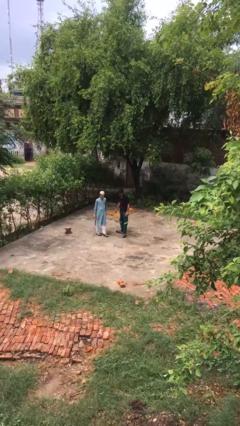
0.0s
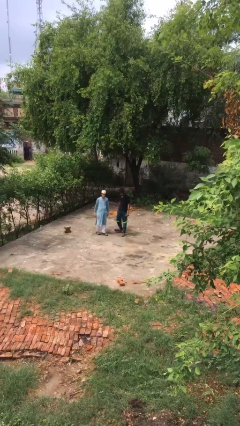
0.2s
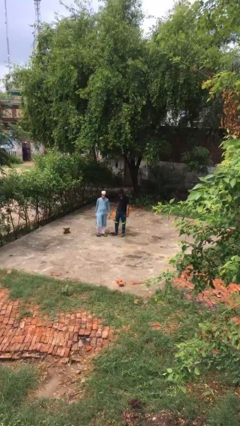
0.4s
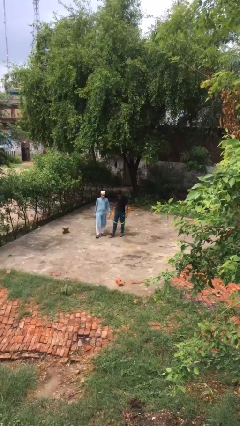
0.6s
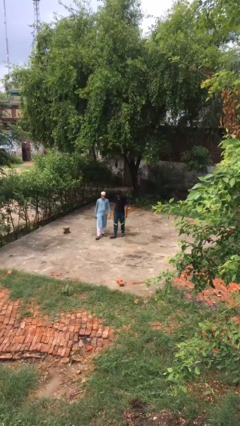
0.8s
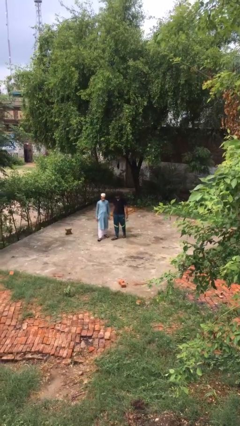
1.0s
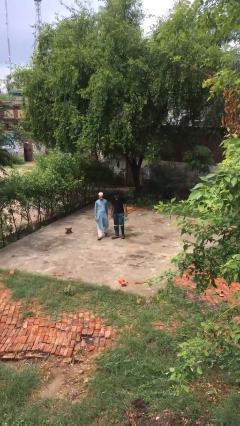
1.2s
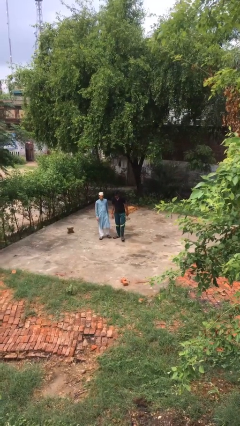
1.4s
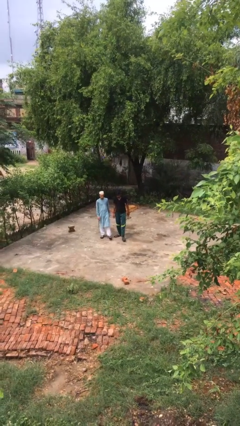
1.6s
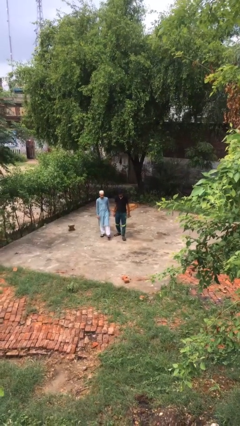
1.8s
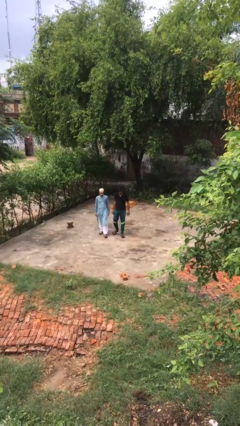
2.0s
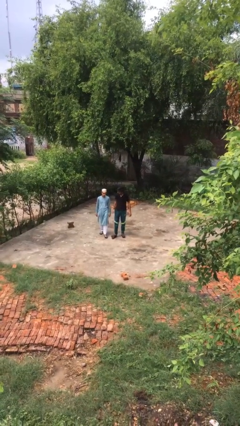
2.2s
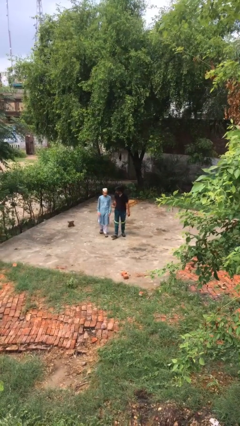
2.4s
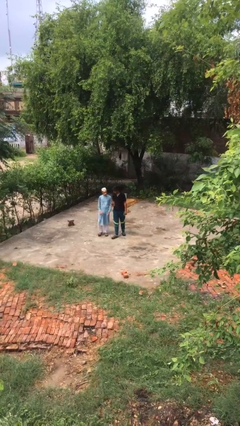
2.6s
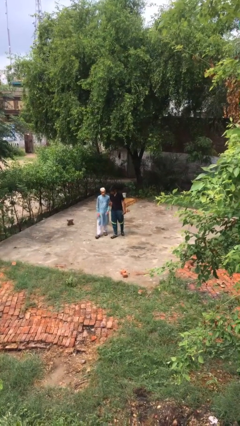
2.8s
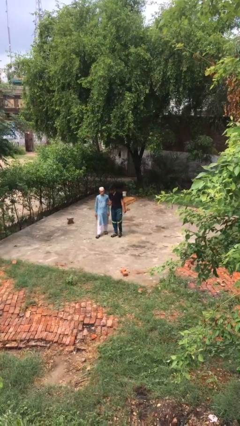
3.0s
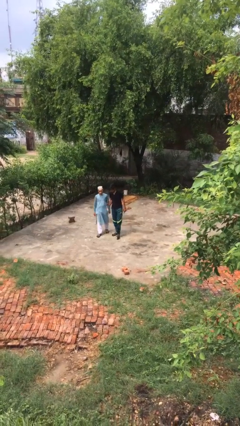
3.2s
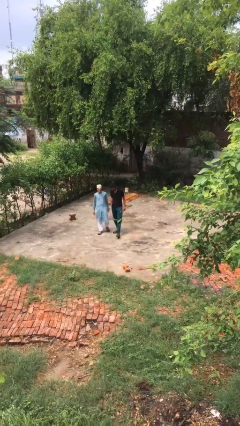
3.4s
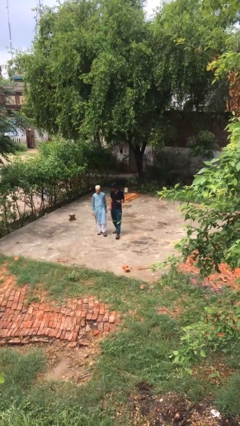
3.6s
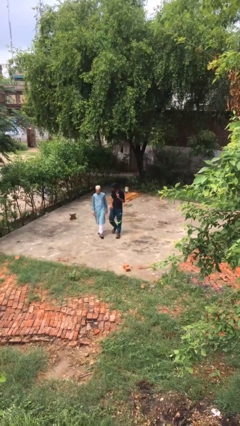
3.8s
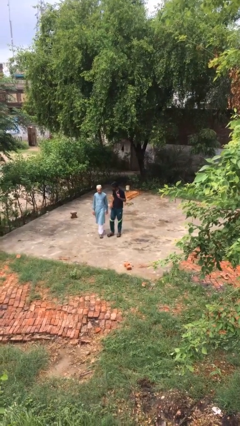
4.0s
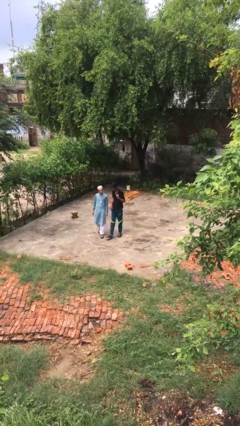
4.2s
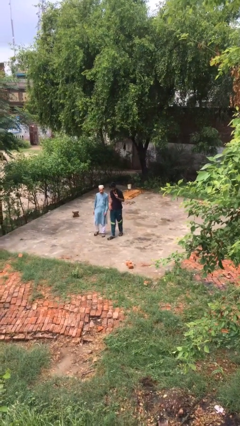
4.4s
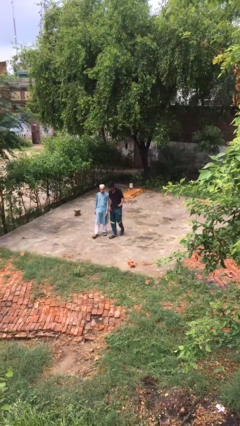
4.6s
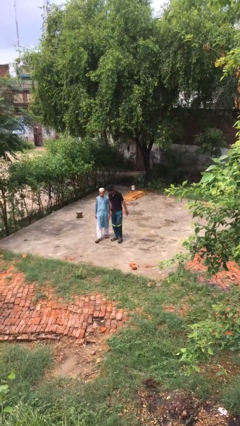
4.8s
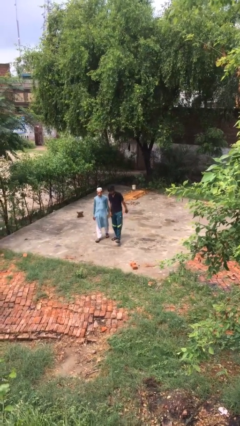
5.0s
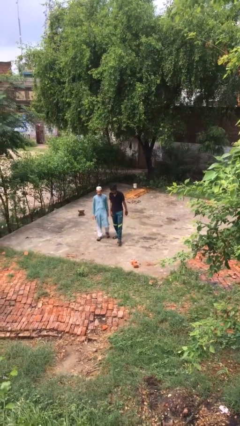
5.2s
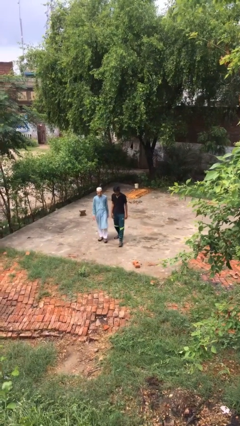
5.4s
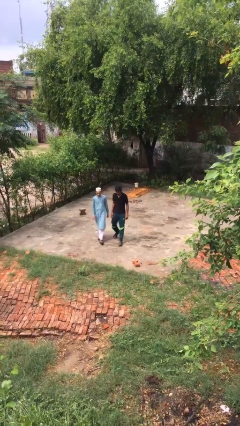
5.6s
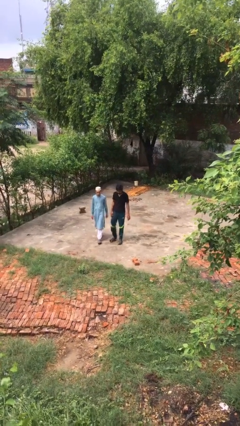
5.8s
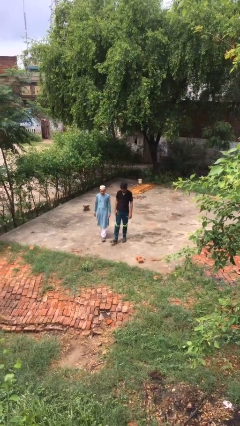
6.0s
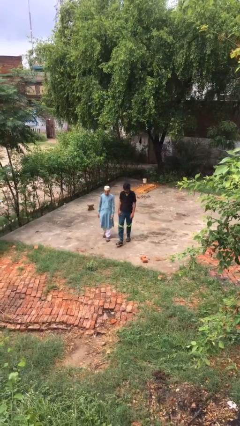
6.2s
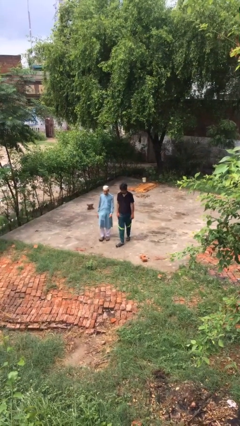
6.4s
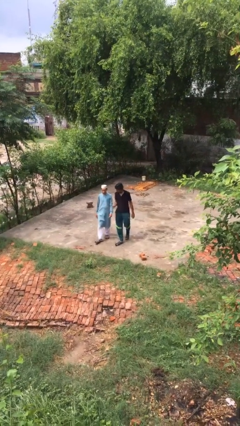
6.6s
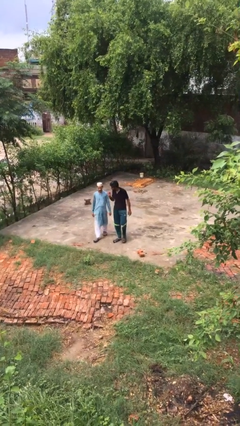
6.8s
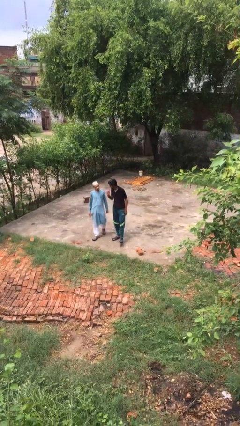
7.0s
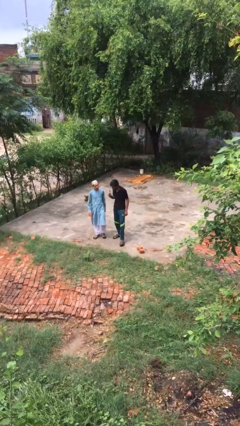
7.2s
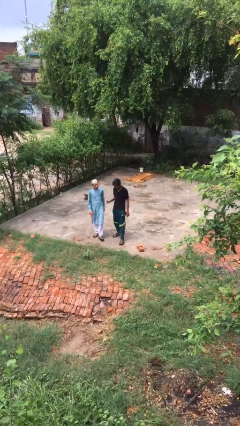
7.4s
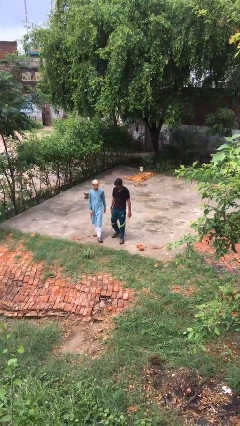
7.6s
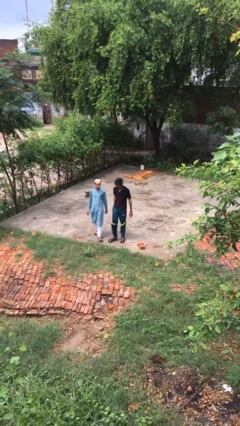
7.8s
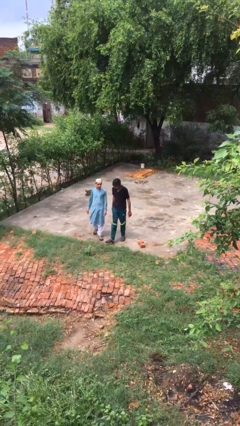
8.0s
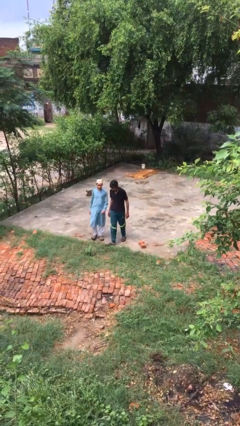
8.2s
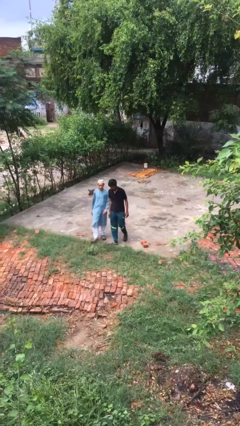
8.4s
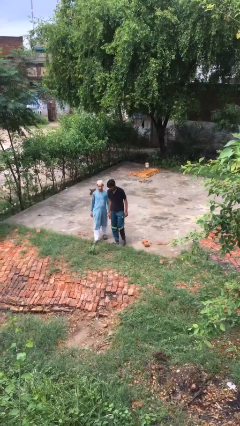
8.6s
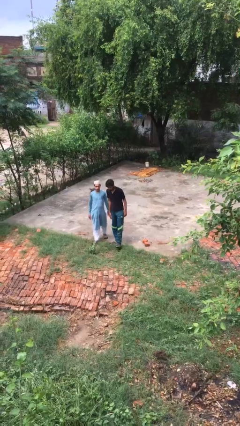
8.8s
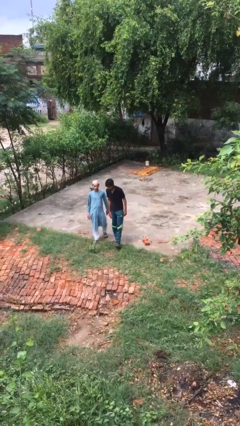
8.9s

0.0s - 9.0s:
person talks to person

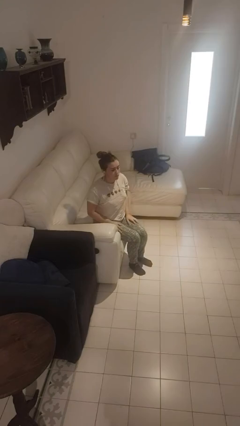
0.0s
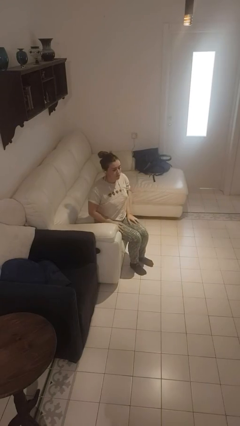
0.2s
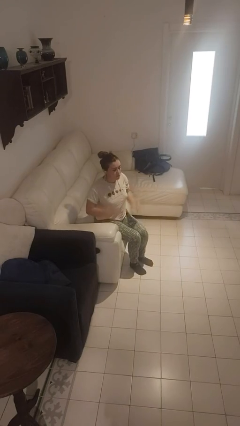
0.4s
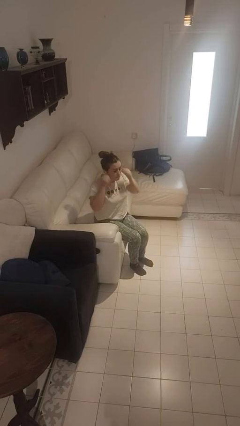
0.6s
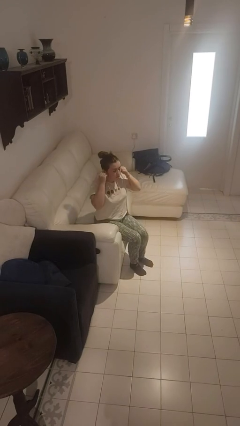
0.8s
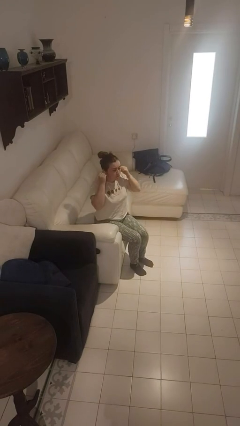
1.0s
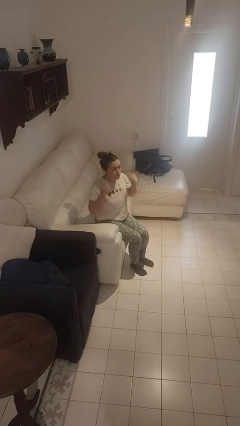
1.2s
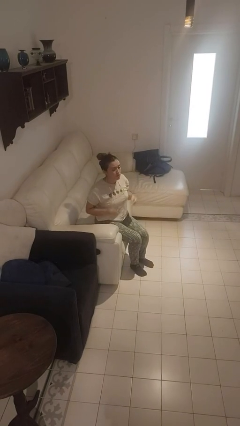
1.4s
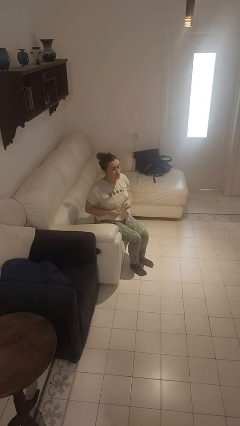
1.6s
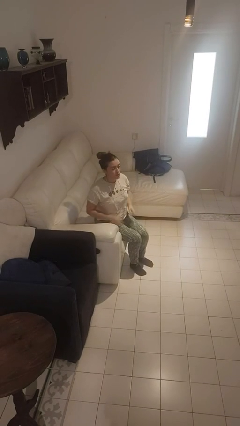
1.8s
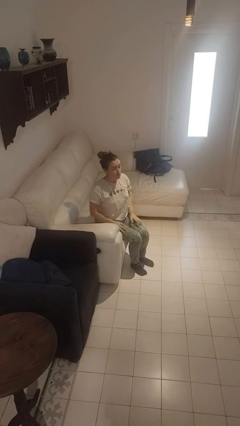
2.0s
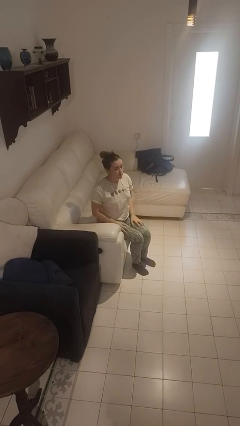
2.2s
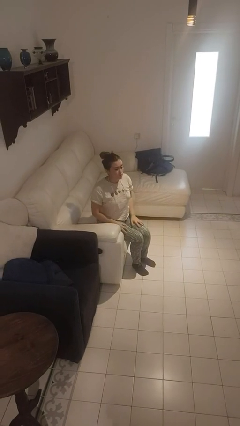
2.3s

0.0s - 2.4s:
person takes off headphones

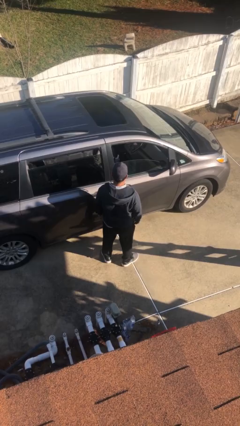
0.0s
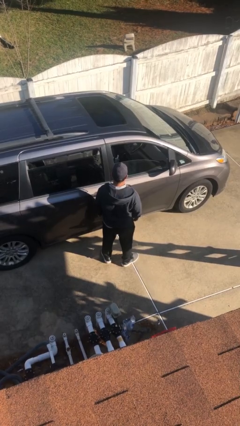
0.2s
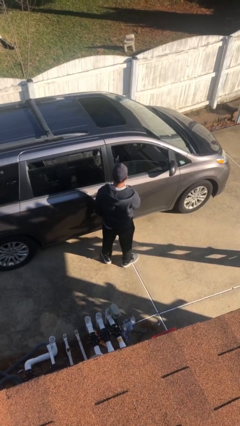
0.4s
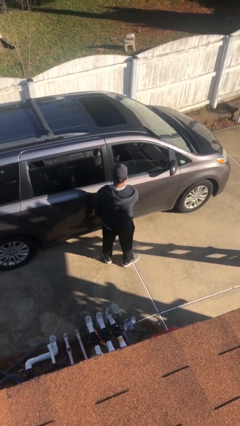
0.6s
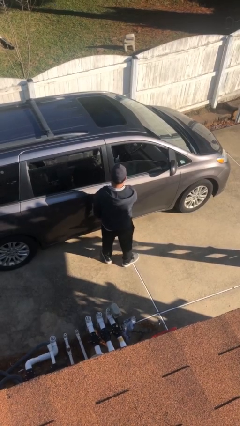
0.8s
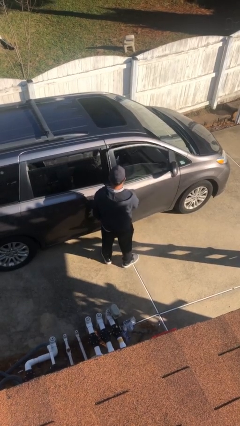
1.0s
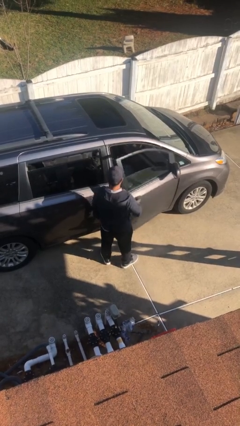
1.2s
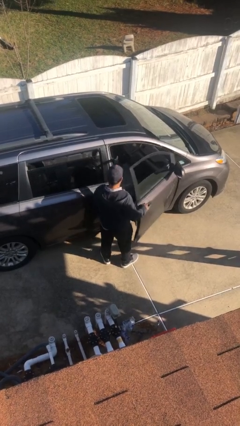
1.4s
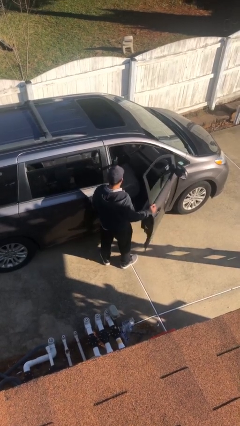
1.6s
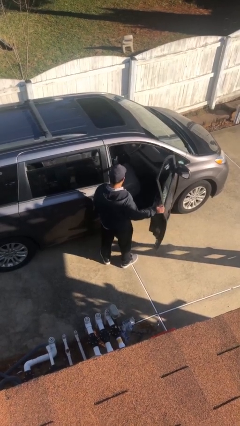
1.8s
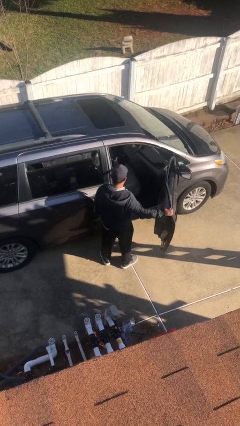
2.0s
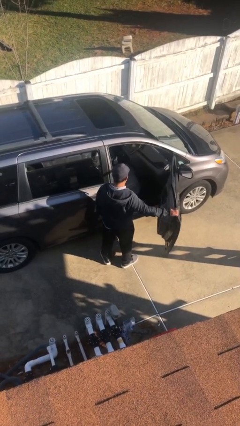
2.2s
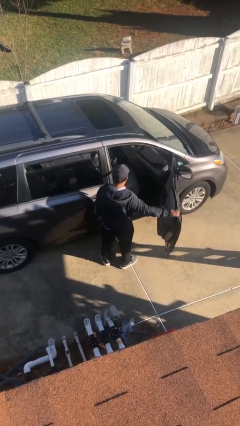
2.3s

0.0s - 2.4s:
person opens car door

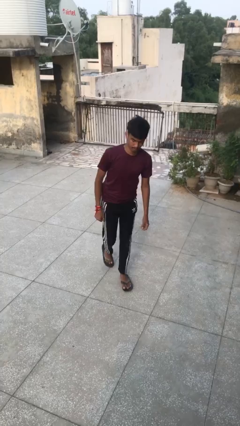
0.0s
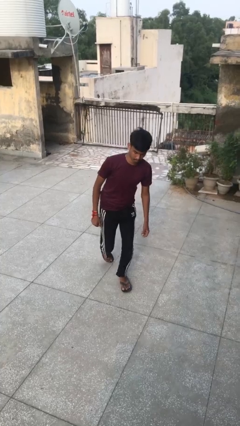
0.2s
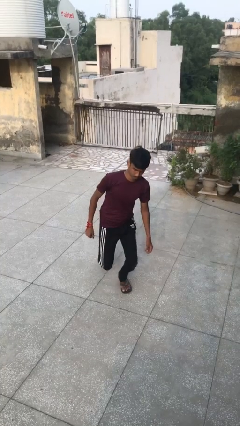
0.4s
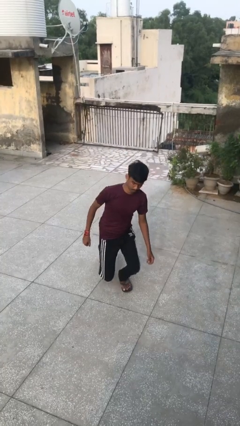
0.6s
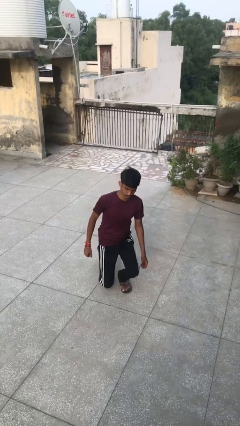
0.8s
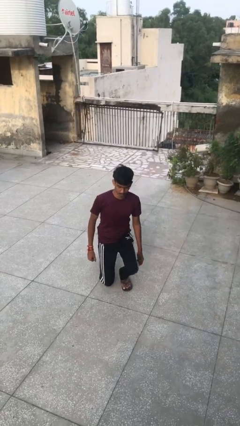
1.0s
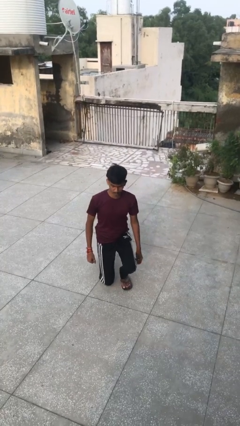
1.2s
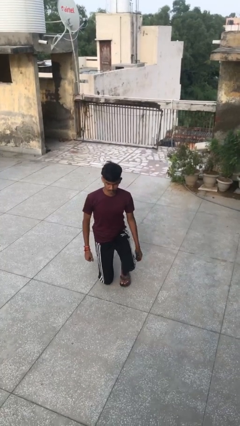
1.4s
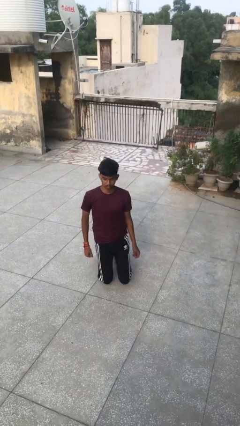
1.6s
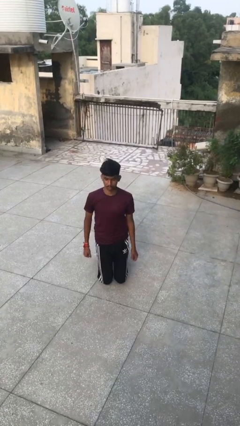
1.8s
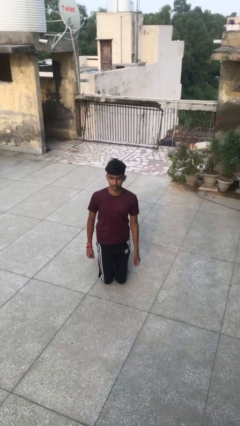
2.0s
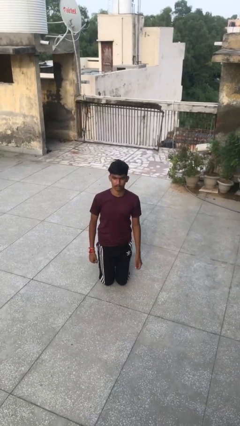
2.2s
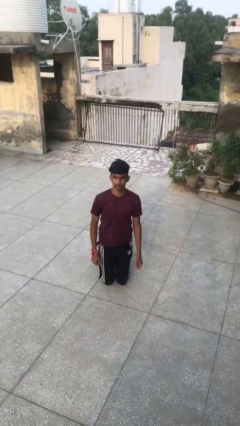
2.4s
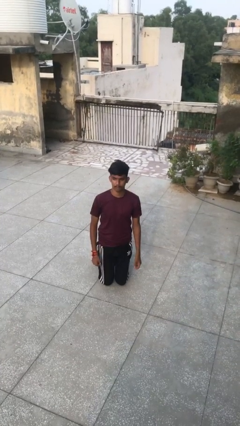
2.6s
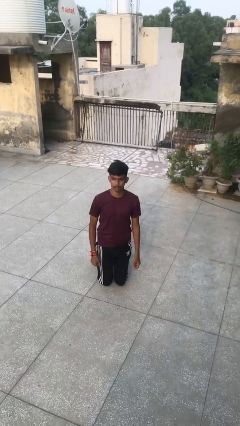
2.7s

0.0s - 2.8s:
person kneels

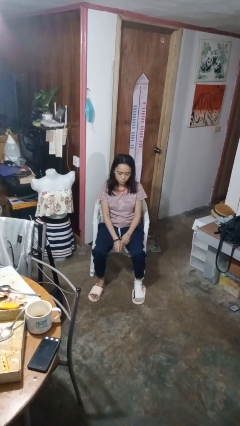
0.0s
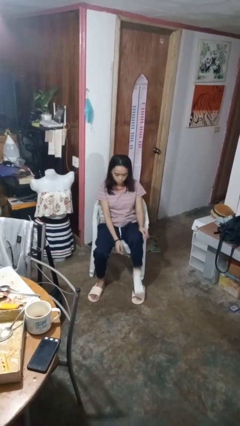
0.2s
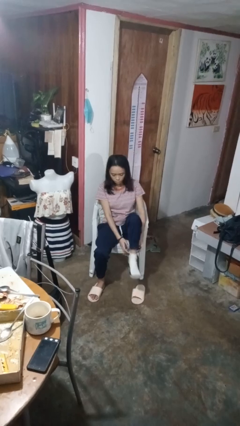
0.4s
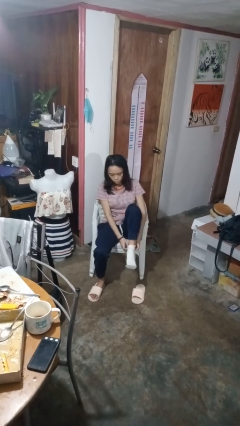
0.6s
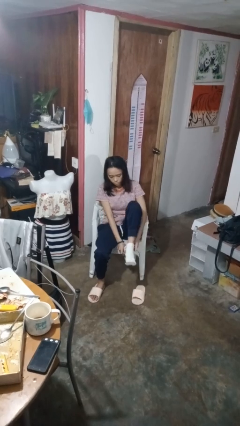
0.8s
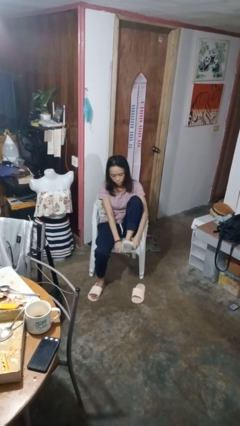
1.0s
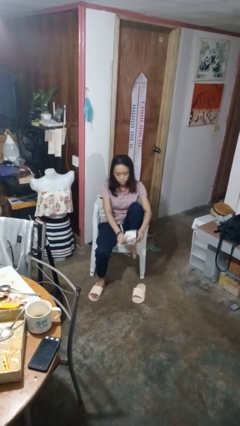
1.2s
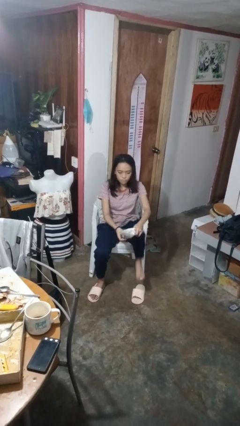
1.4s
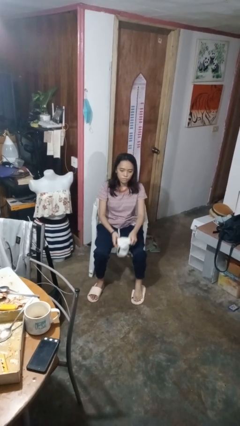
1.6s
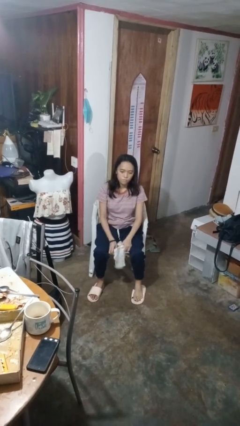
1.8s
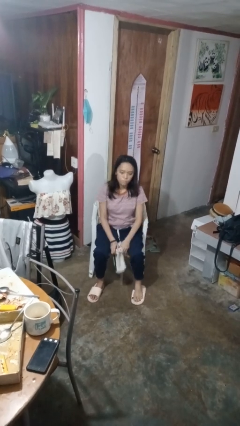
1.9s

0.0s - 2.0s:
person takes off socks
